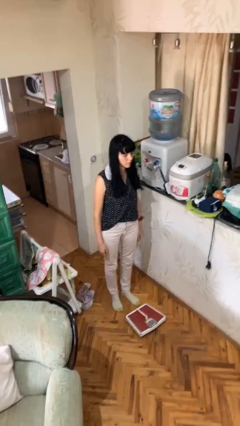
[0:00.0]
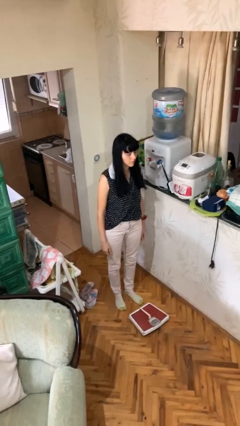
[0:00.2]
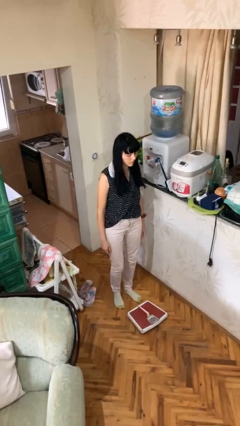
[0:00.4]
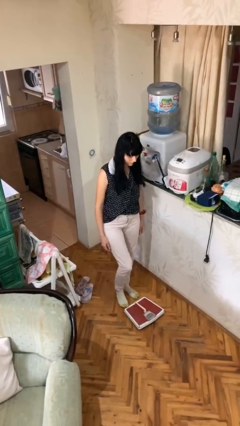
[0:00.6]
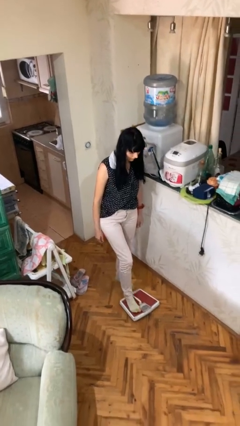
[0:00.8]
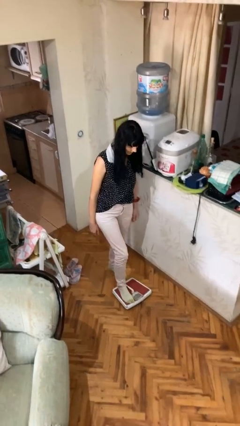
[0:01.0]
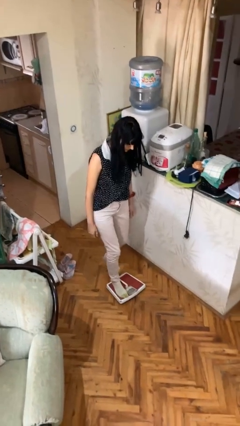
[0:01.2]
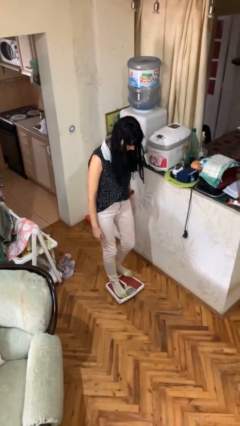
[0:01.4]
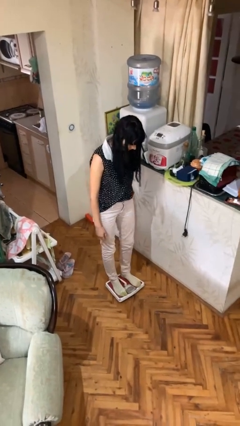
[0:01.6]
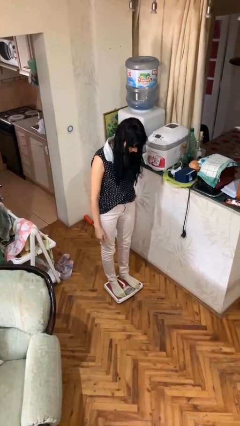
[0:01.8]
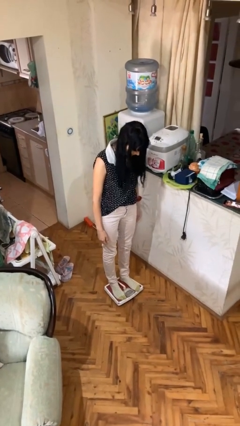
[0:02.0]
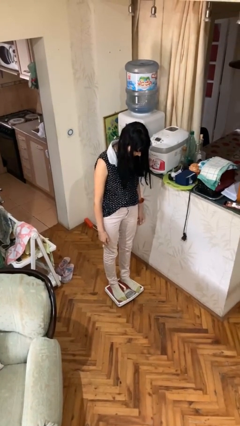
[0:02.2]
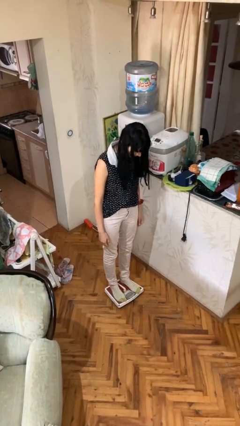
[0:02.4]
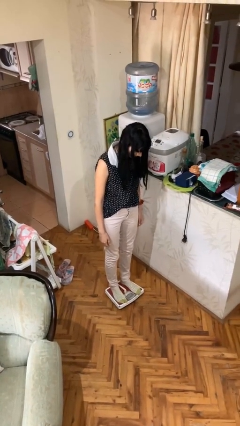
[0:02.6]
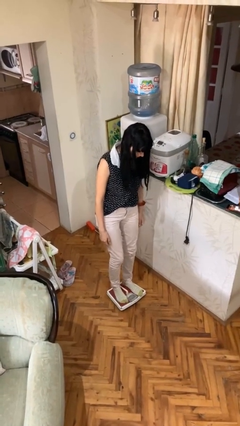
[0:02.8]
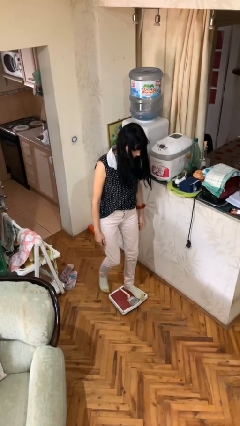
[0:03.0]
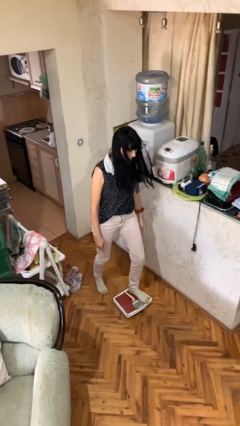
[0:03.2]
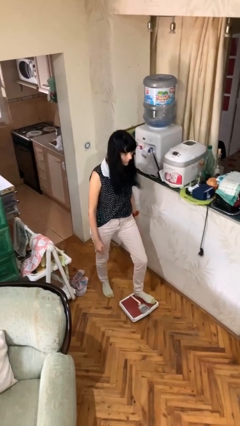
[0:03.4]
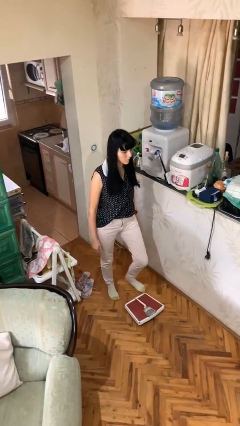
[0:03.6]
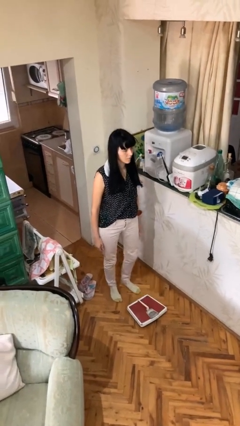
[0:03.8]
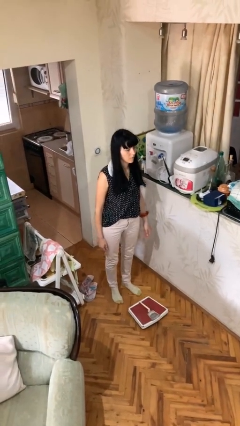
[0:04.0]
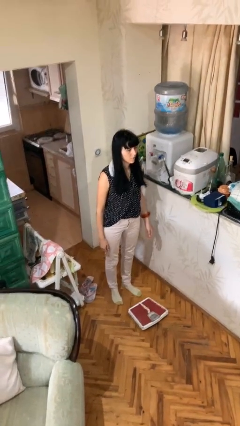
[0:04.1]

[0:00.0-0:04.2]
person uses bodyweight scale

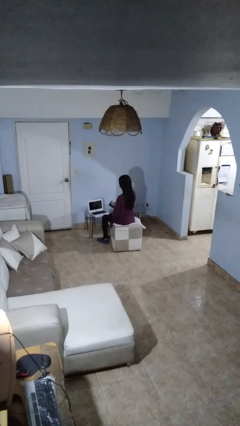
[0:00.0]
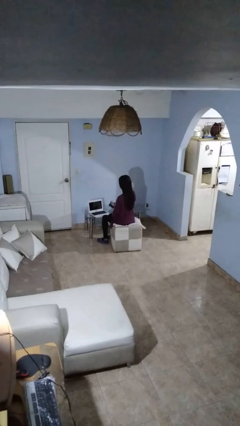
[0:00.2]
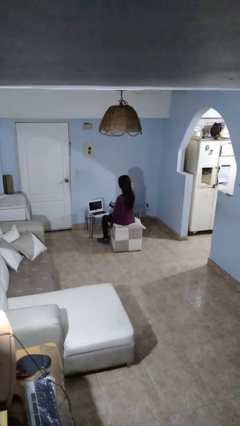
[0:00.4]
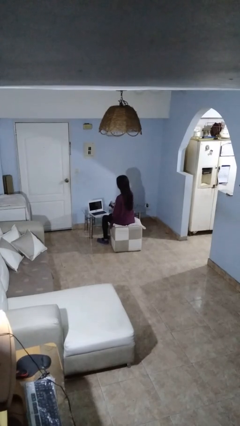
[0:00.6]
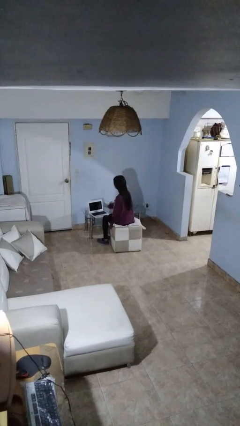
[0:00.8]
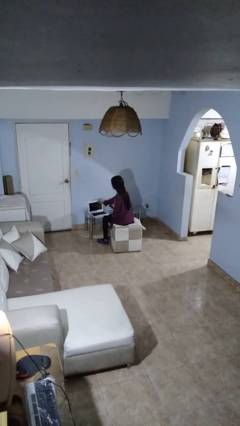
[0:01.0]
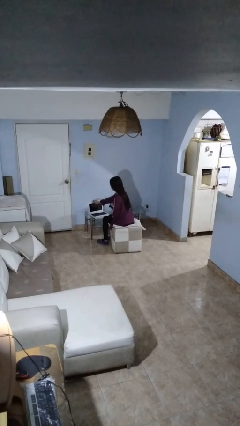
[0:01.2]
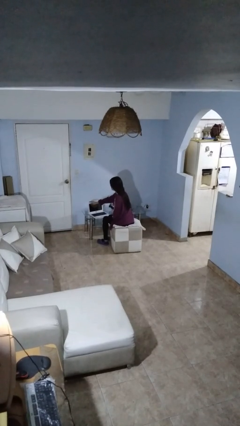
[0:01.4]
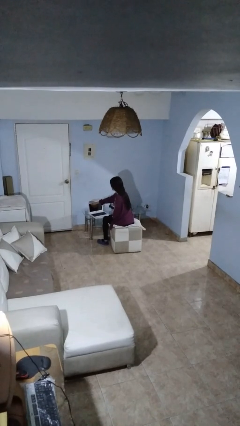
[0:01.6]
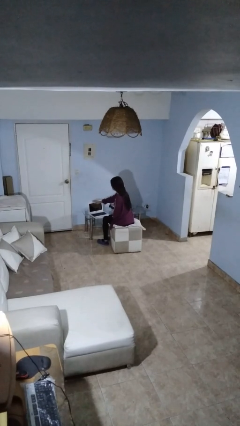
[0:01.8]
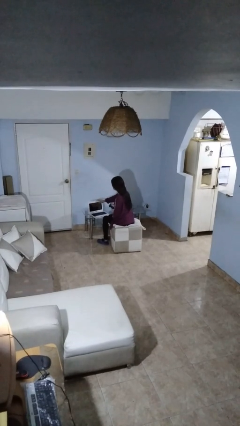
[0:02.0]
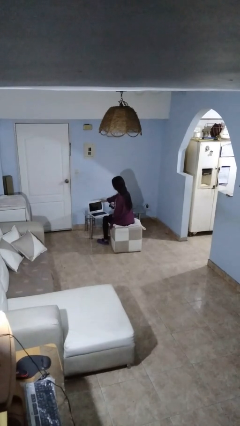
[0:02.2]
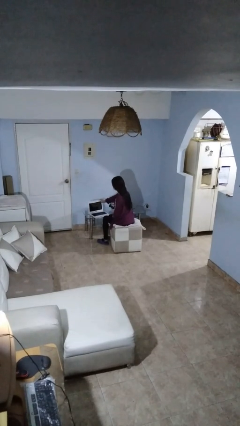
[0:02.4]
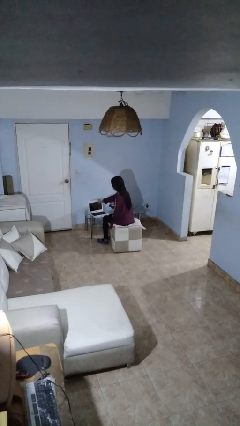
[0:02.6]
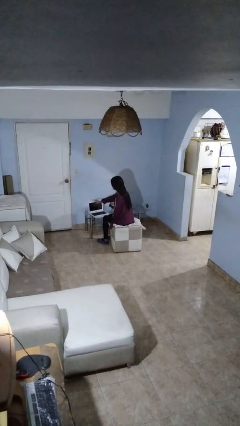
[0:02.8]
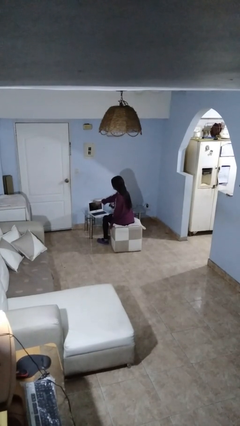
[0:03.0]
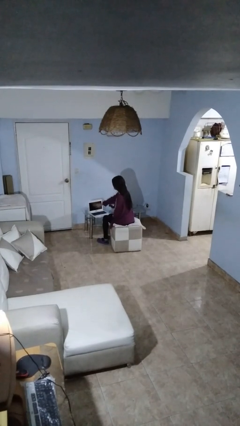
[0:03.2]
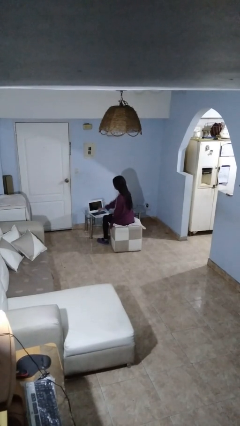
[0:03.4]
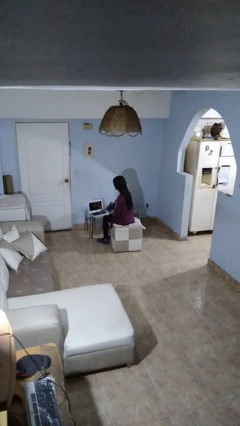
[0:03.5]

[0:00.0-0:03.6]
person waves hand over object

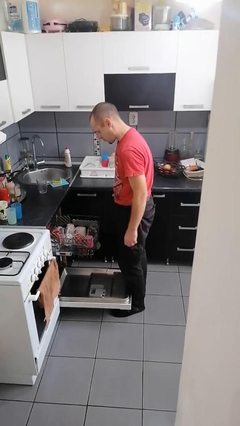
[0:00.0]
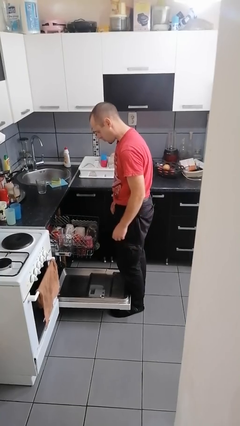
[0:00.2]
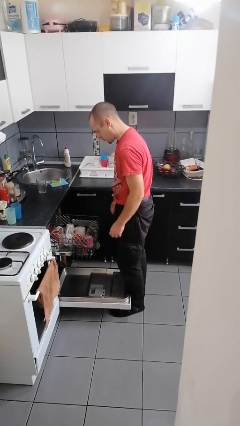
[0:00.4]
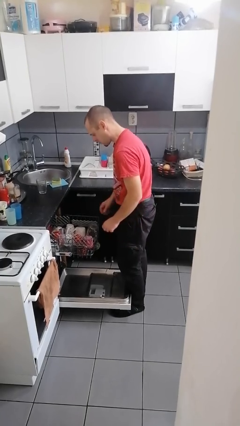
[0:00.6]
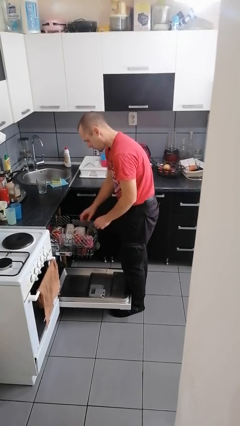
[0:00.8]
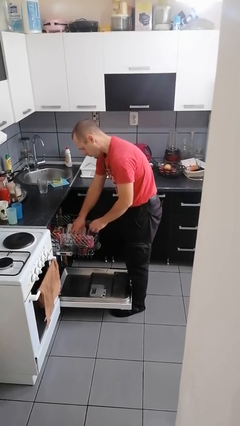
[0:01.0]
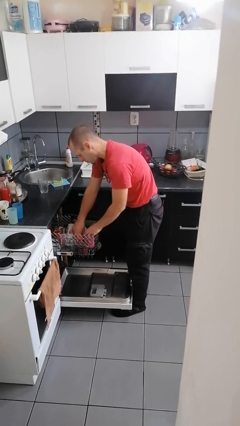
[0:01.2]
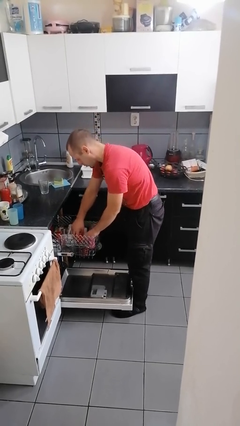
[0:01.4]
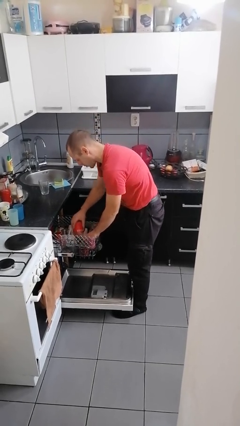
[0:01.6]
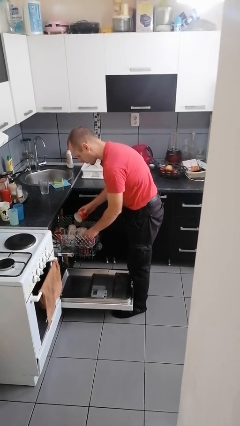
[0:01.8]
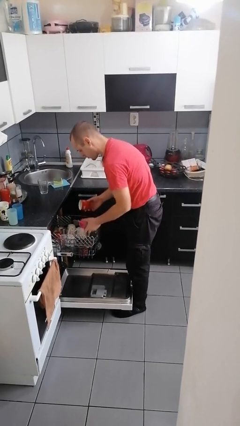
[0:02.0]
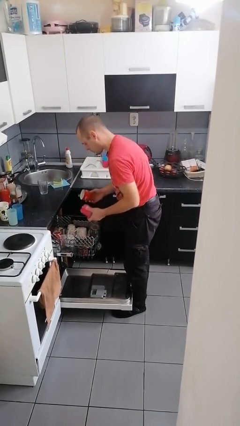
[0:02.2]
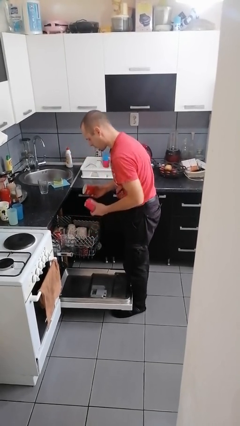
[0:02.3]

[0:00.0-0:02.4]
person unloads dishwasher

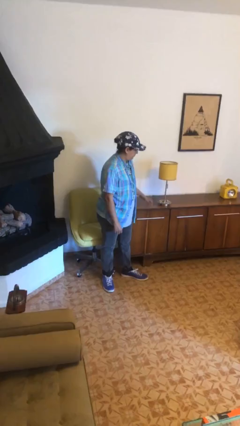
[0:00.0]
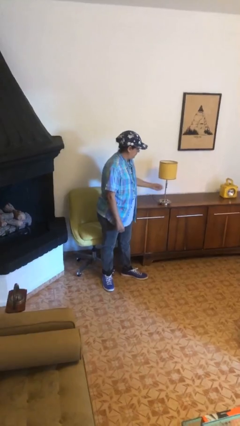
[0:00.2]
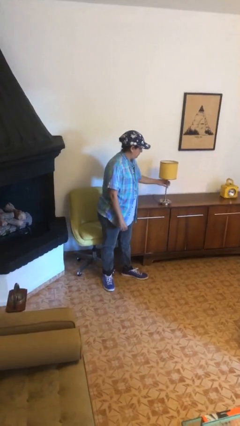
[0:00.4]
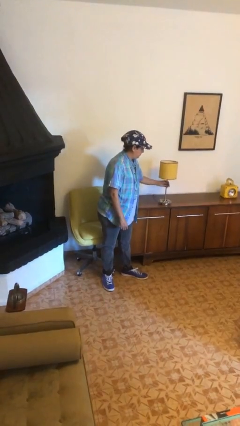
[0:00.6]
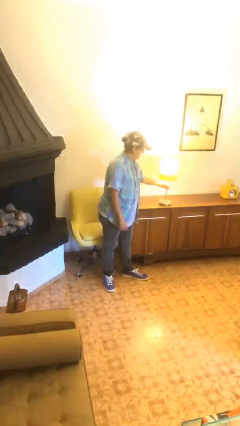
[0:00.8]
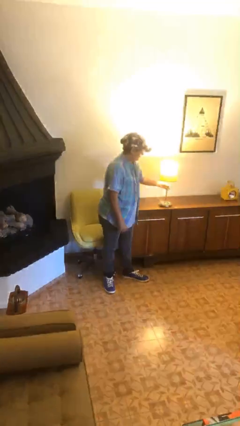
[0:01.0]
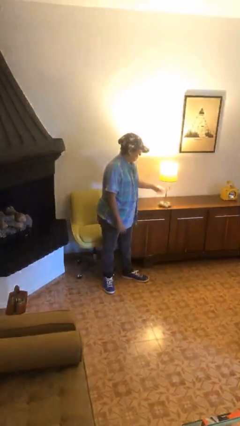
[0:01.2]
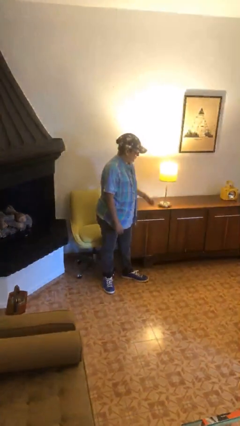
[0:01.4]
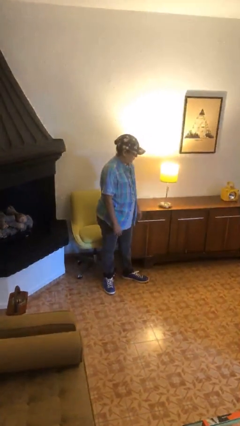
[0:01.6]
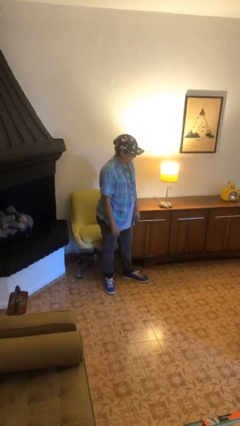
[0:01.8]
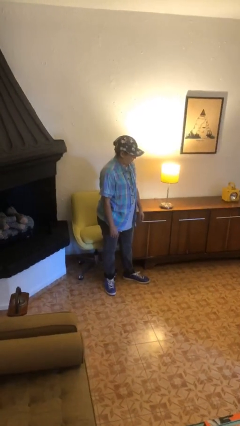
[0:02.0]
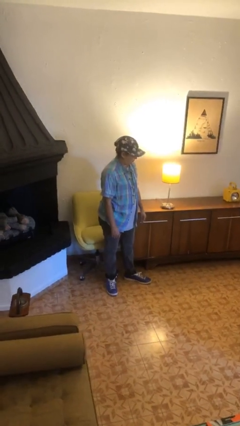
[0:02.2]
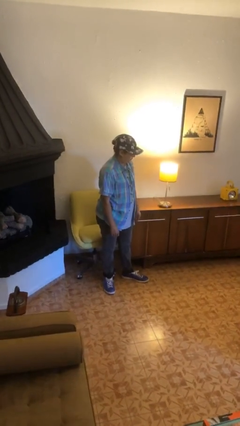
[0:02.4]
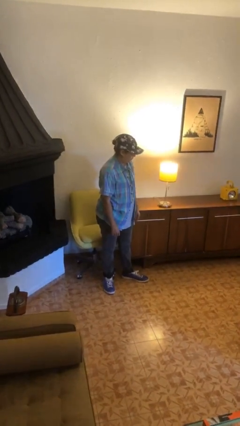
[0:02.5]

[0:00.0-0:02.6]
person turns on lamp

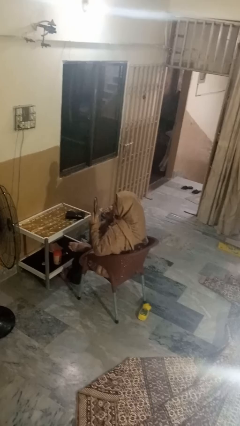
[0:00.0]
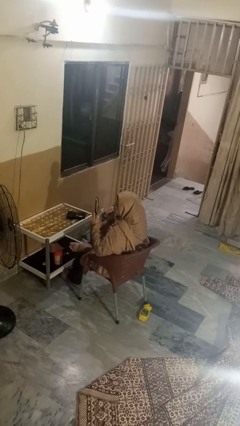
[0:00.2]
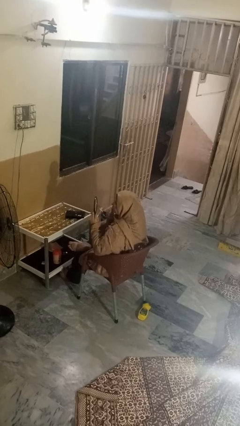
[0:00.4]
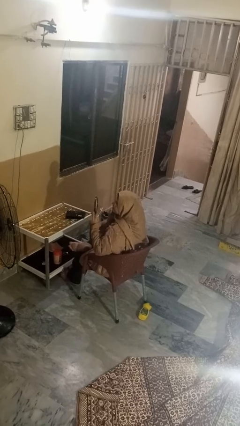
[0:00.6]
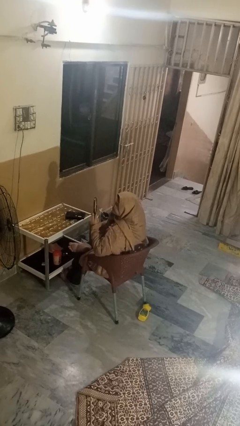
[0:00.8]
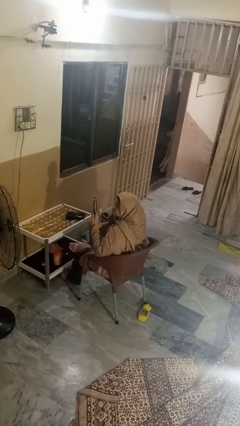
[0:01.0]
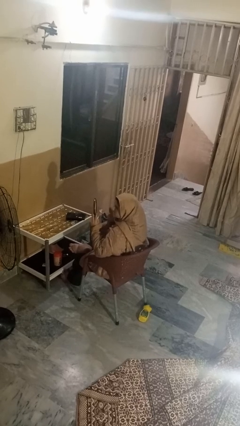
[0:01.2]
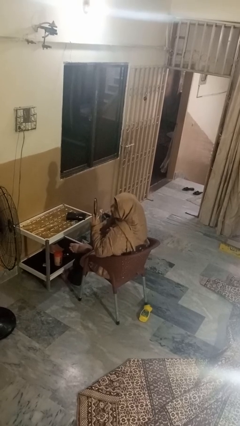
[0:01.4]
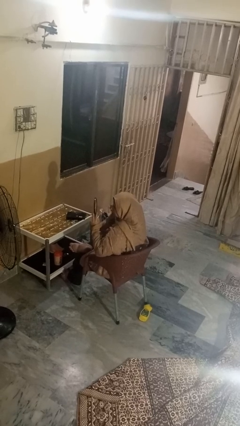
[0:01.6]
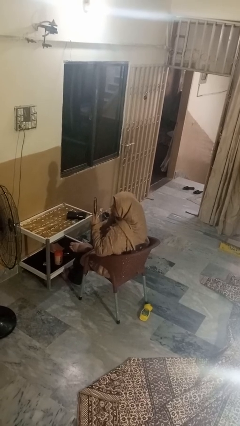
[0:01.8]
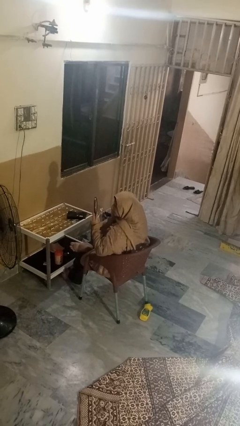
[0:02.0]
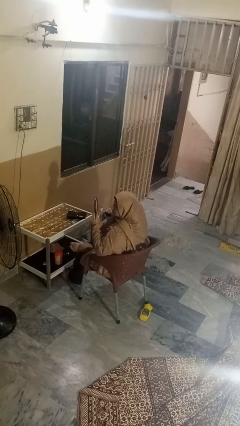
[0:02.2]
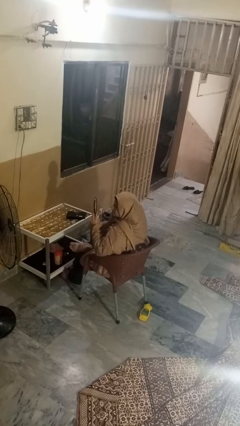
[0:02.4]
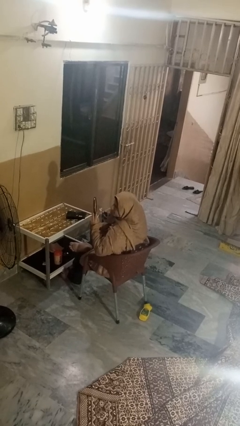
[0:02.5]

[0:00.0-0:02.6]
person applies foundation makeup

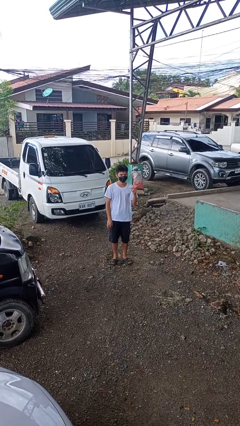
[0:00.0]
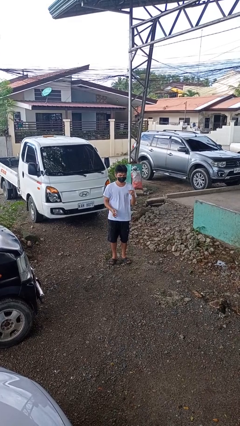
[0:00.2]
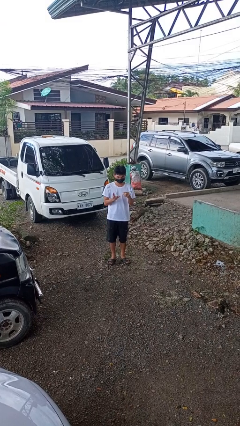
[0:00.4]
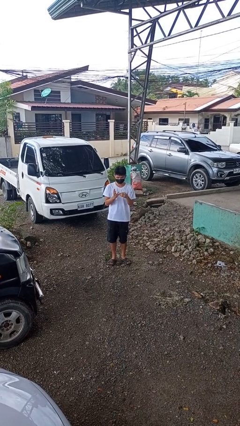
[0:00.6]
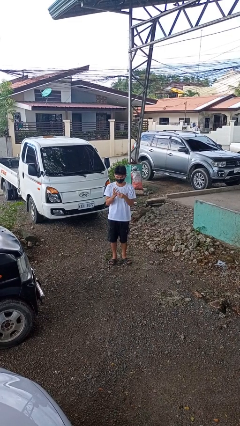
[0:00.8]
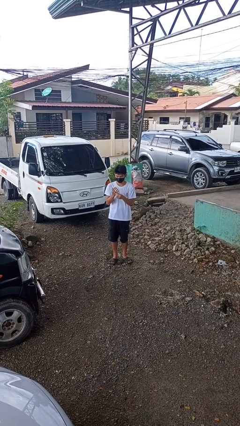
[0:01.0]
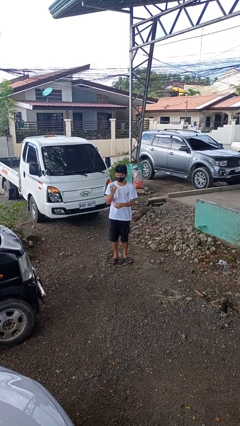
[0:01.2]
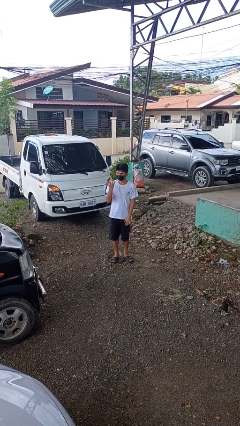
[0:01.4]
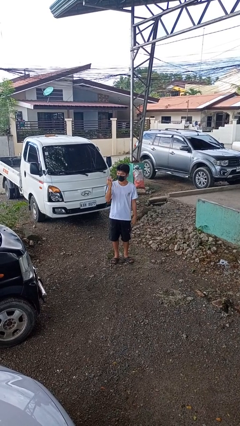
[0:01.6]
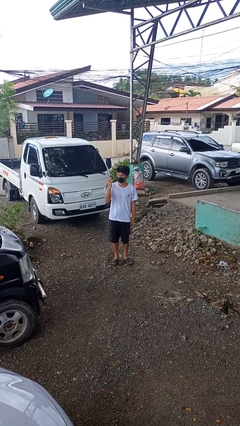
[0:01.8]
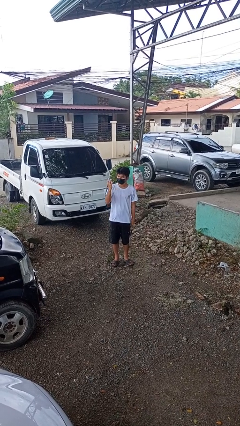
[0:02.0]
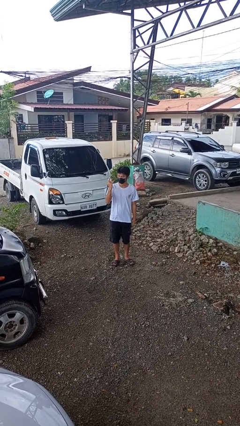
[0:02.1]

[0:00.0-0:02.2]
person puts on ring
